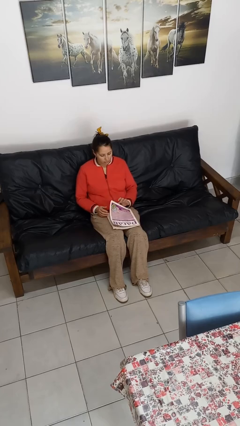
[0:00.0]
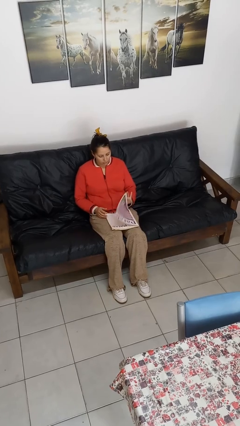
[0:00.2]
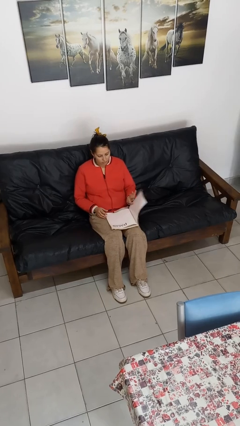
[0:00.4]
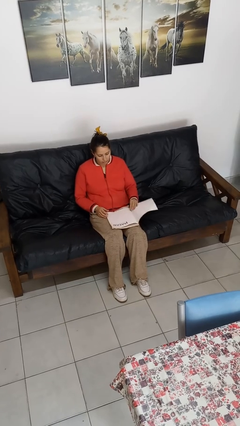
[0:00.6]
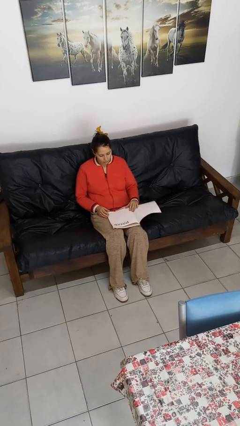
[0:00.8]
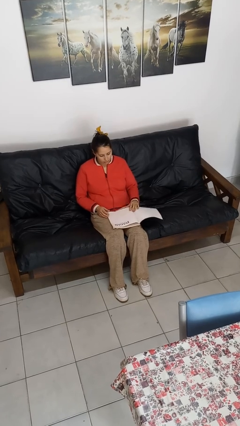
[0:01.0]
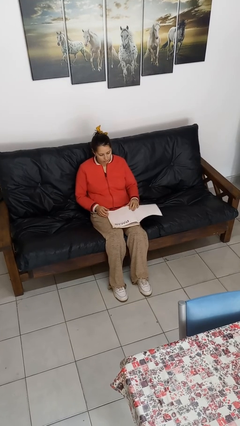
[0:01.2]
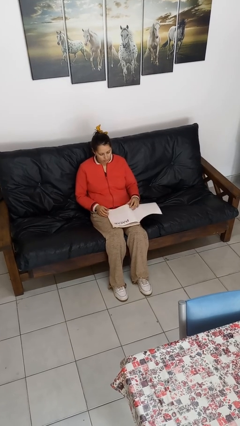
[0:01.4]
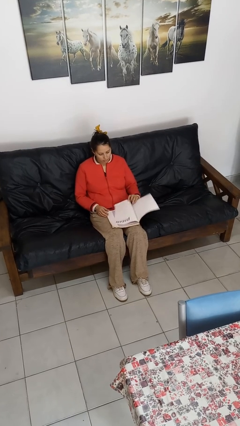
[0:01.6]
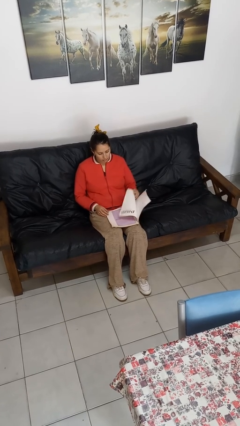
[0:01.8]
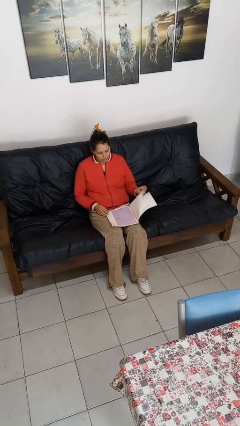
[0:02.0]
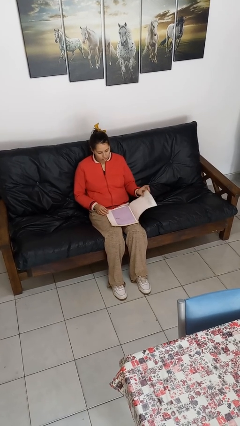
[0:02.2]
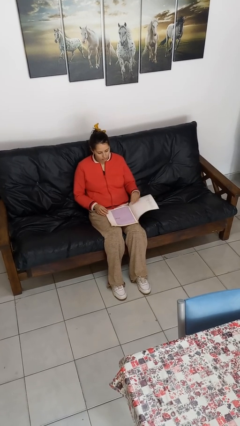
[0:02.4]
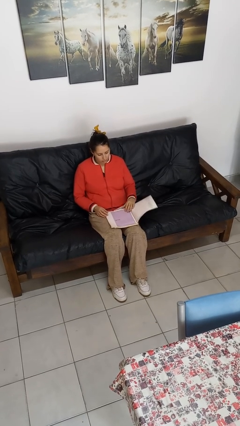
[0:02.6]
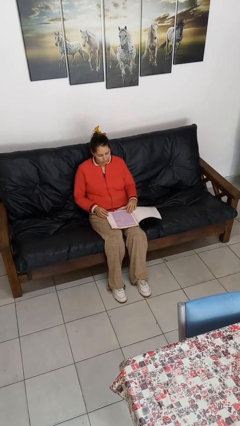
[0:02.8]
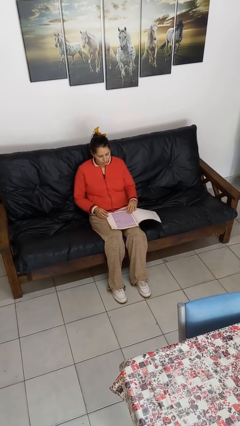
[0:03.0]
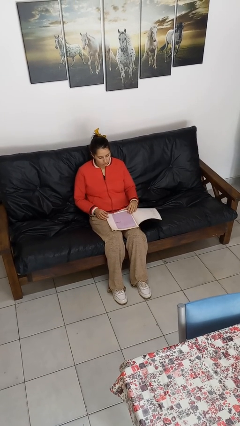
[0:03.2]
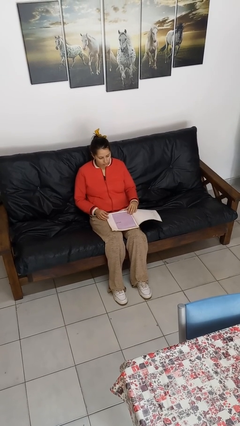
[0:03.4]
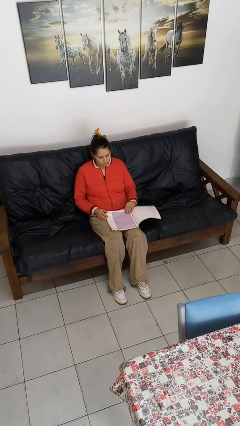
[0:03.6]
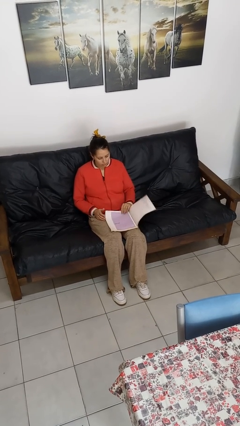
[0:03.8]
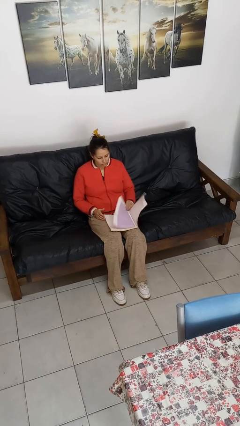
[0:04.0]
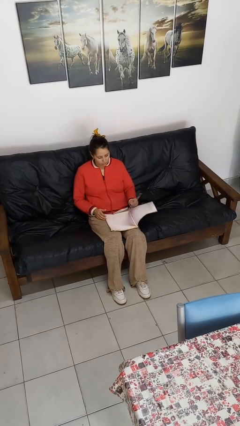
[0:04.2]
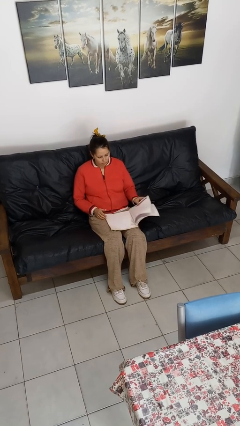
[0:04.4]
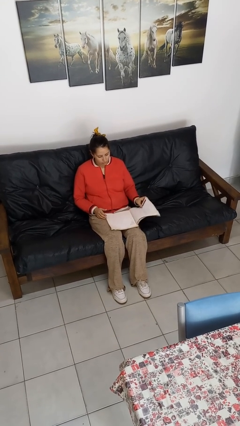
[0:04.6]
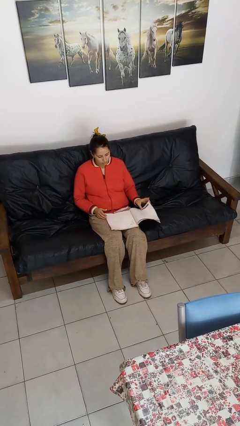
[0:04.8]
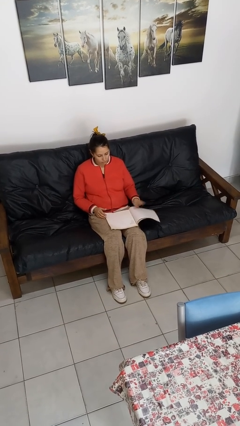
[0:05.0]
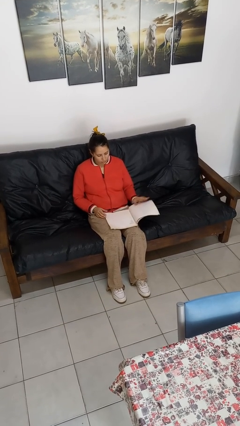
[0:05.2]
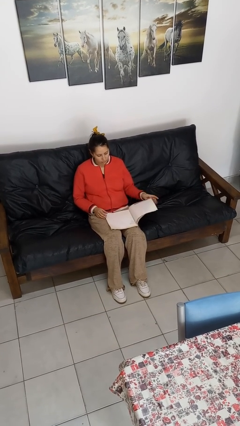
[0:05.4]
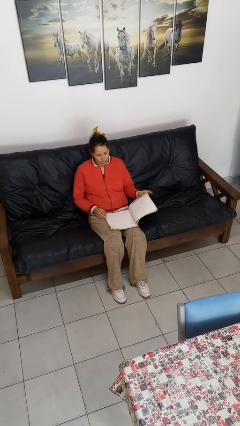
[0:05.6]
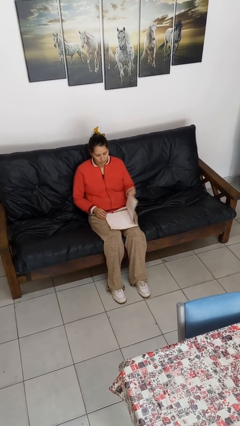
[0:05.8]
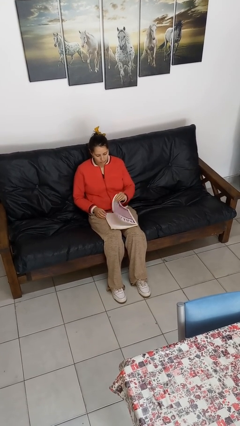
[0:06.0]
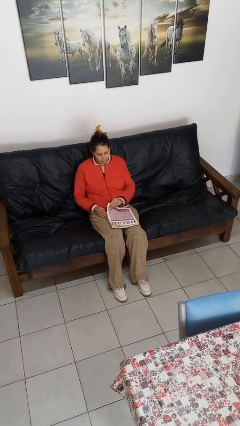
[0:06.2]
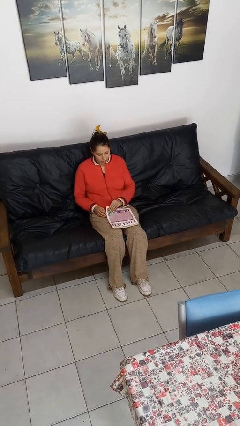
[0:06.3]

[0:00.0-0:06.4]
person reads magazine

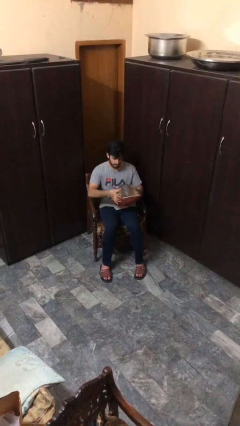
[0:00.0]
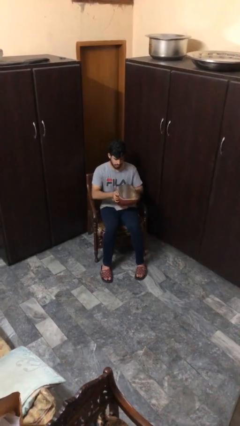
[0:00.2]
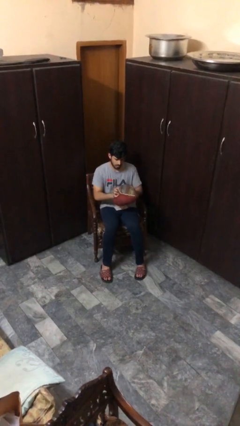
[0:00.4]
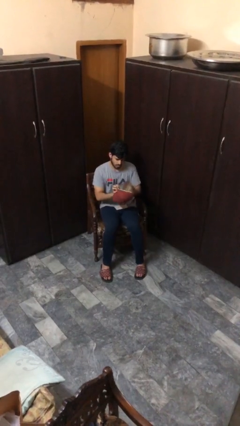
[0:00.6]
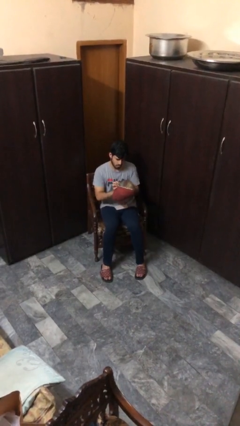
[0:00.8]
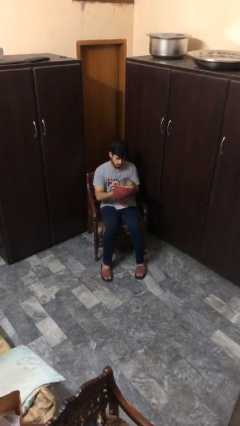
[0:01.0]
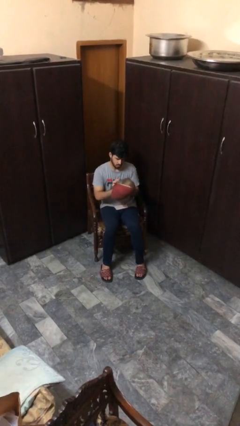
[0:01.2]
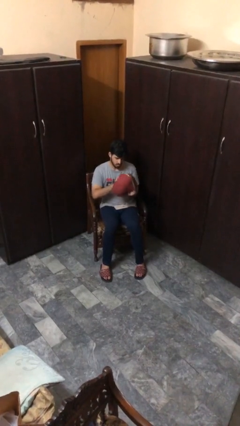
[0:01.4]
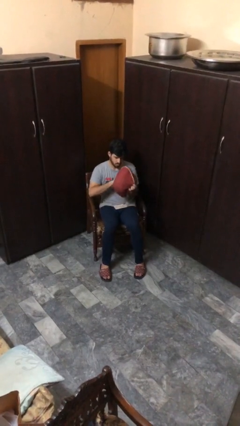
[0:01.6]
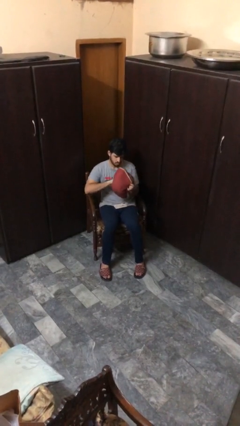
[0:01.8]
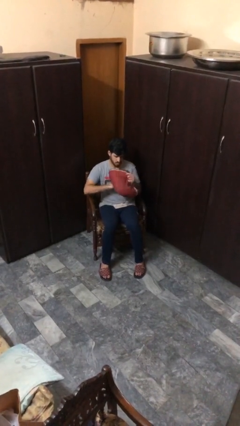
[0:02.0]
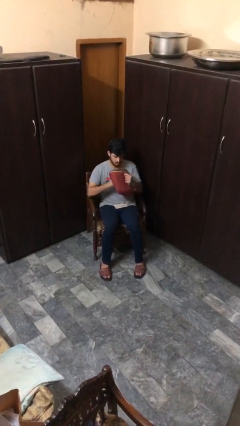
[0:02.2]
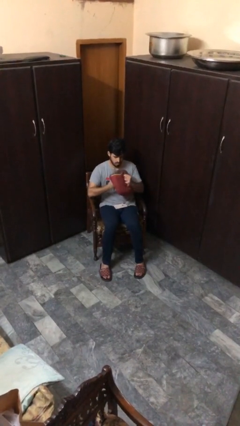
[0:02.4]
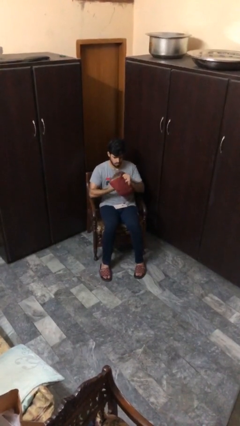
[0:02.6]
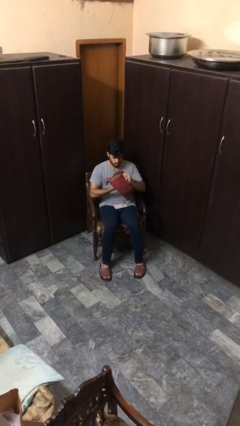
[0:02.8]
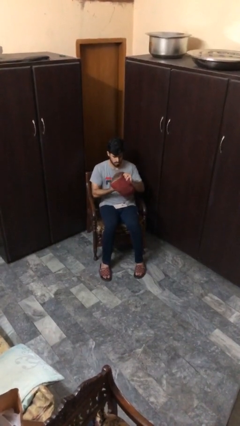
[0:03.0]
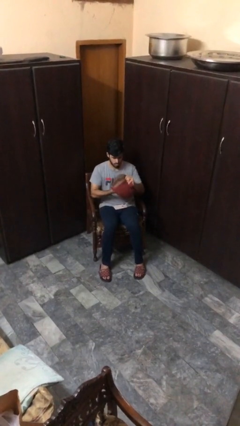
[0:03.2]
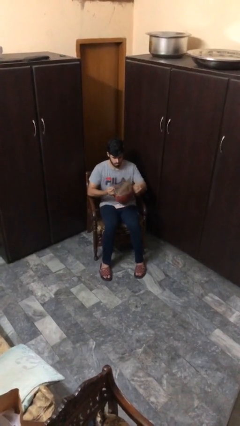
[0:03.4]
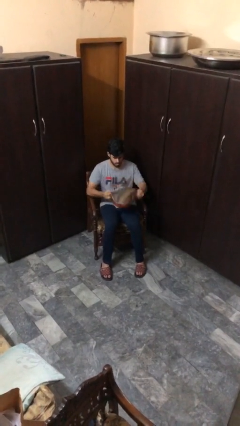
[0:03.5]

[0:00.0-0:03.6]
person squeezes object

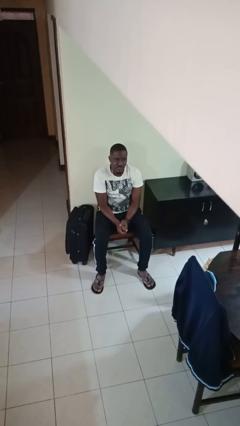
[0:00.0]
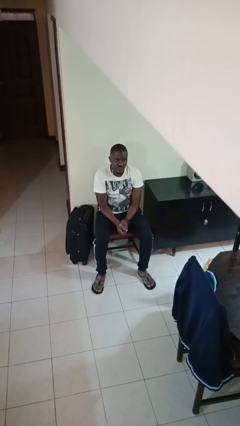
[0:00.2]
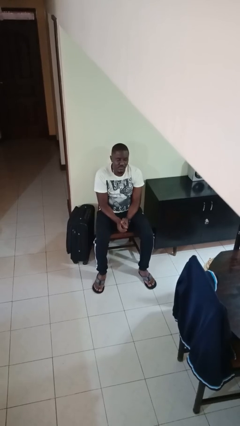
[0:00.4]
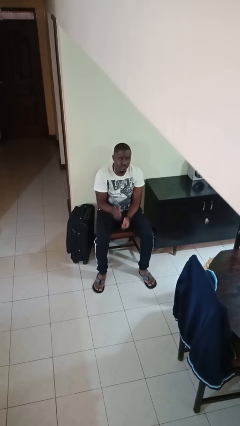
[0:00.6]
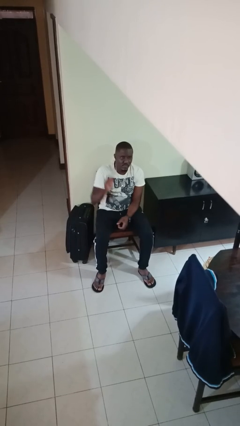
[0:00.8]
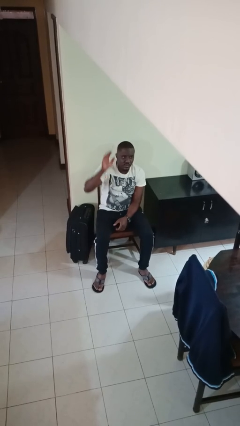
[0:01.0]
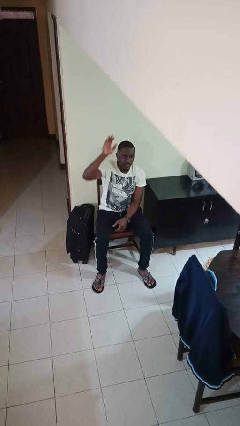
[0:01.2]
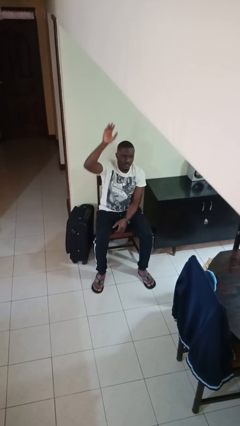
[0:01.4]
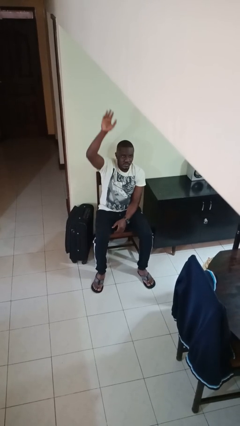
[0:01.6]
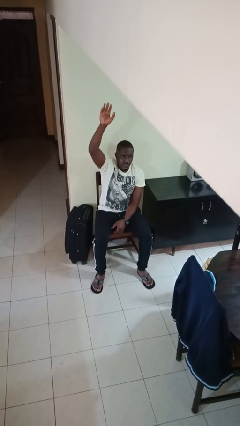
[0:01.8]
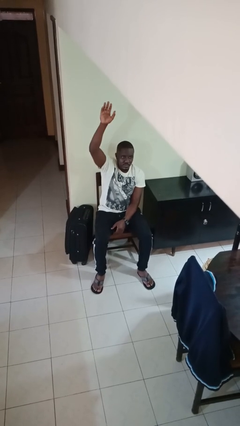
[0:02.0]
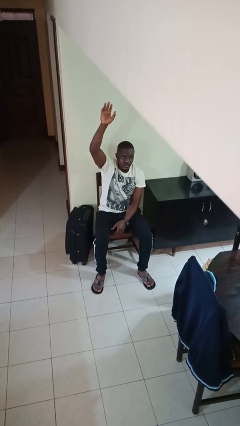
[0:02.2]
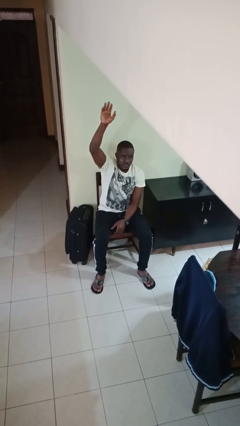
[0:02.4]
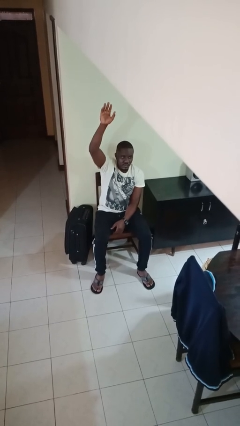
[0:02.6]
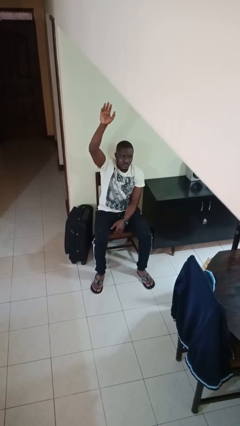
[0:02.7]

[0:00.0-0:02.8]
person gestures raise hand

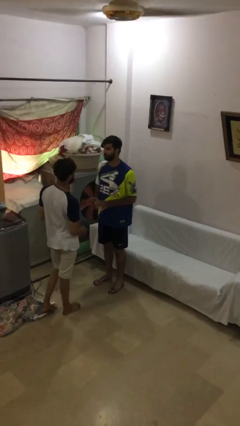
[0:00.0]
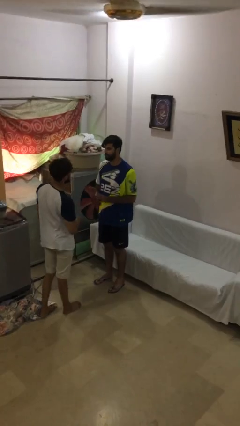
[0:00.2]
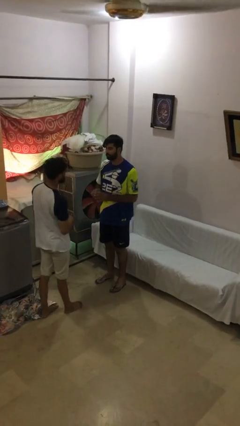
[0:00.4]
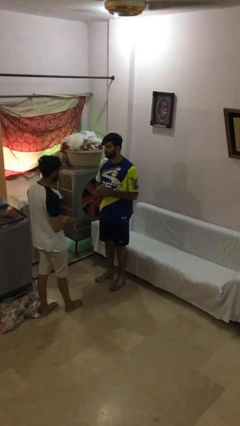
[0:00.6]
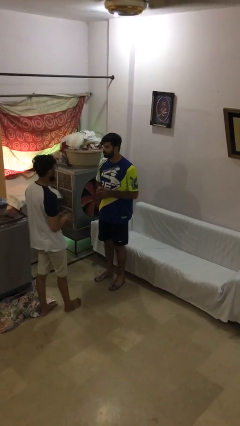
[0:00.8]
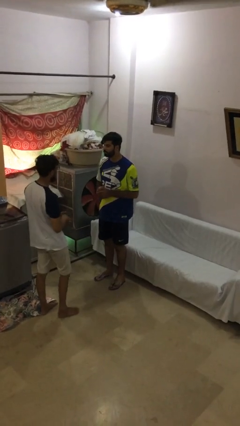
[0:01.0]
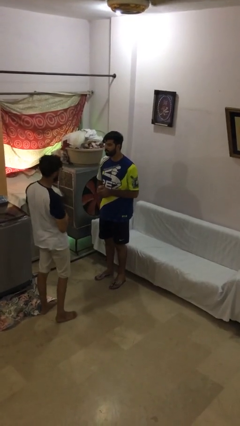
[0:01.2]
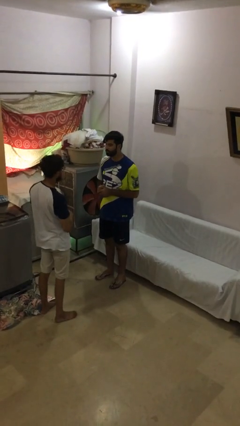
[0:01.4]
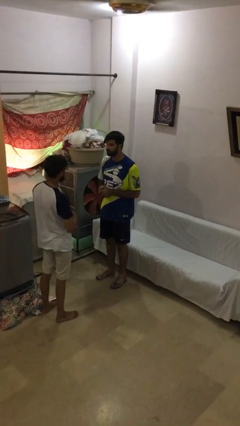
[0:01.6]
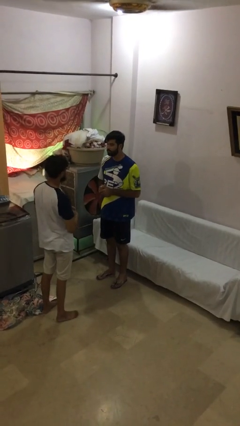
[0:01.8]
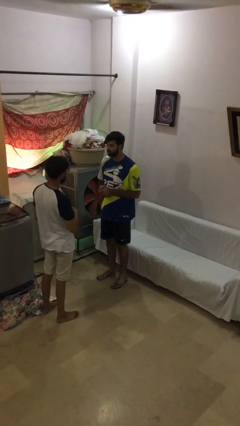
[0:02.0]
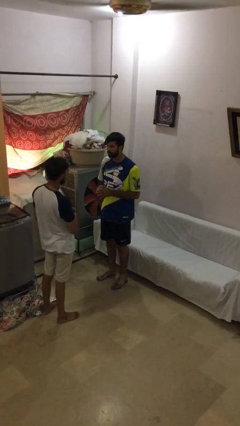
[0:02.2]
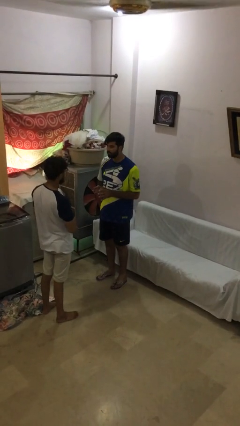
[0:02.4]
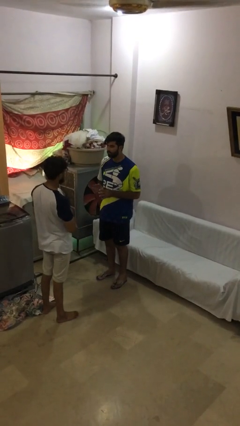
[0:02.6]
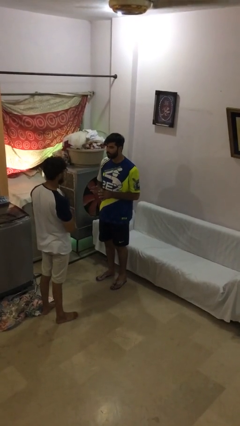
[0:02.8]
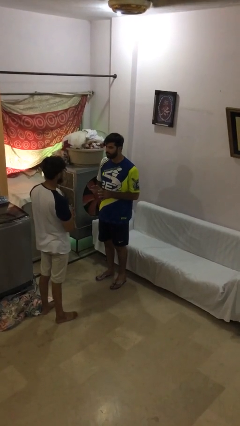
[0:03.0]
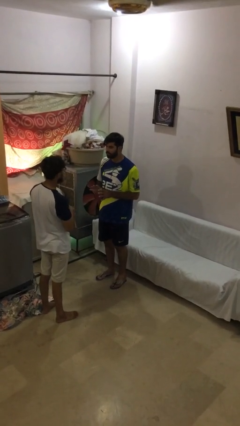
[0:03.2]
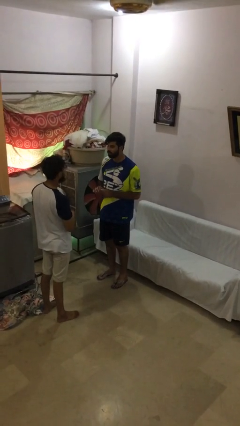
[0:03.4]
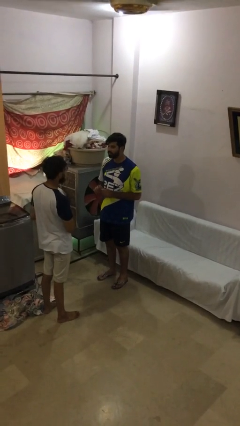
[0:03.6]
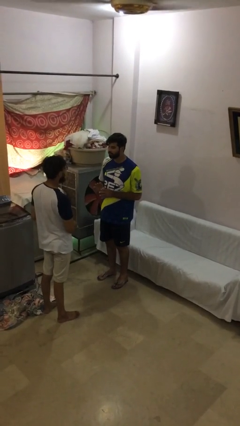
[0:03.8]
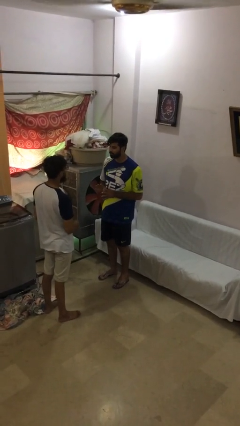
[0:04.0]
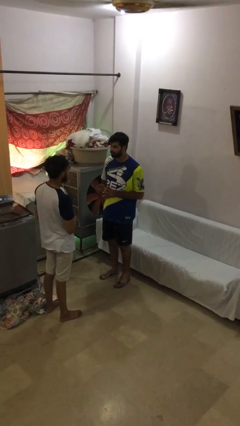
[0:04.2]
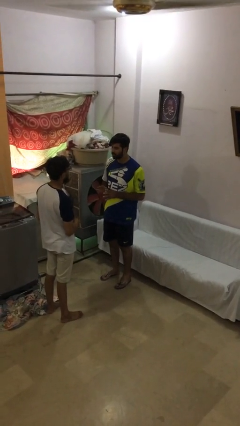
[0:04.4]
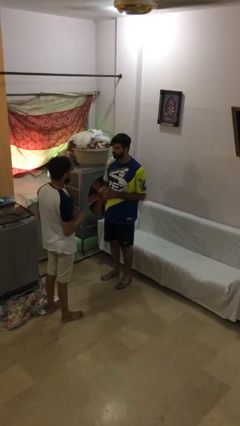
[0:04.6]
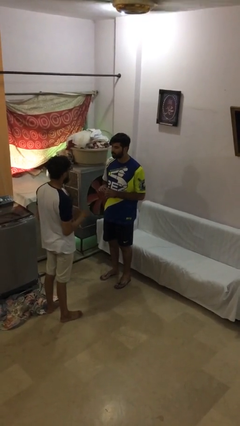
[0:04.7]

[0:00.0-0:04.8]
person talks to person

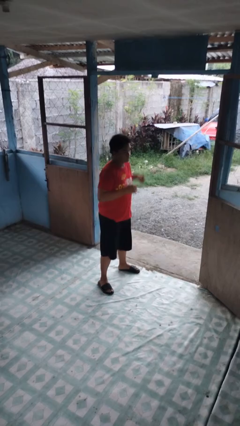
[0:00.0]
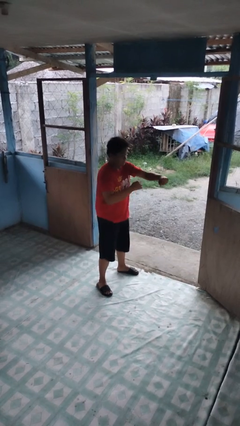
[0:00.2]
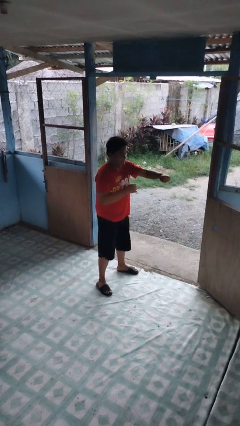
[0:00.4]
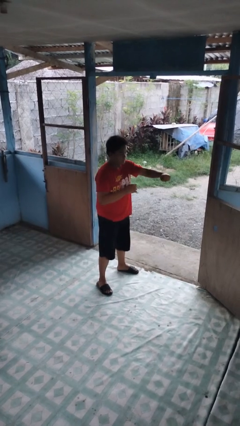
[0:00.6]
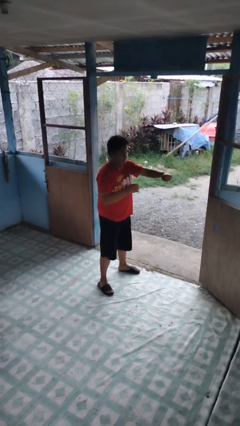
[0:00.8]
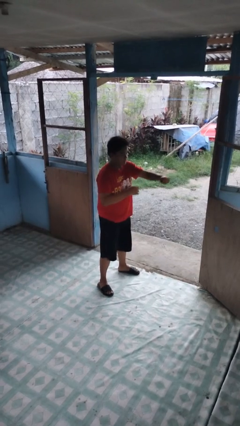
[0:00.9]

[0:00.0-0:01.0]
person punches
